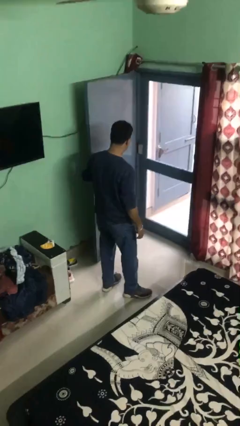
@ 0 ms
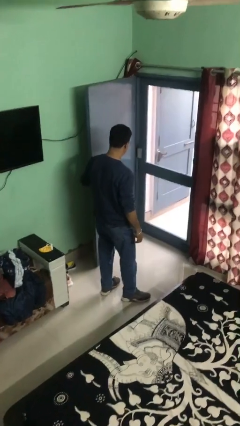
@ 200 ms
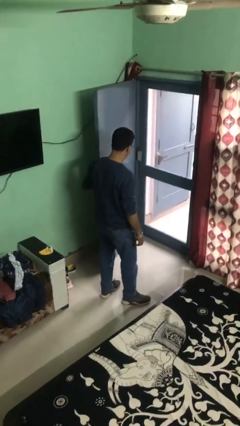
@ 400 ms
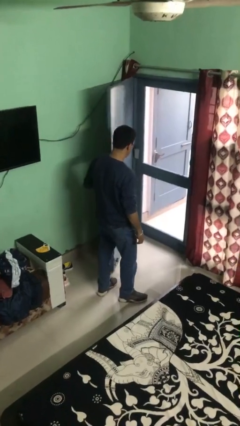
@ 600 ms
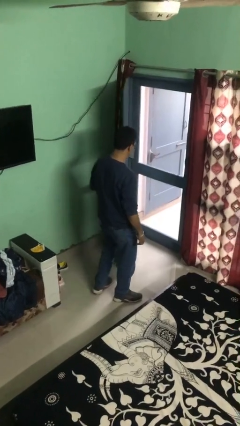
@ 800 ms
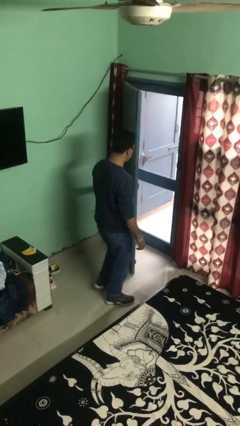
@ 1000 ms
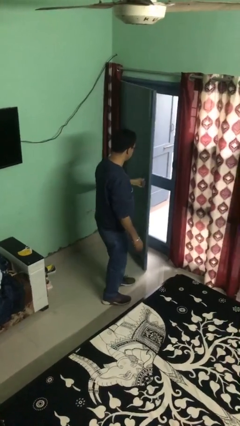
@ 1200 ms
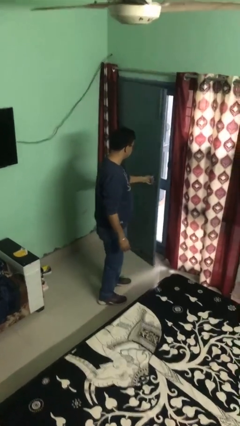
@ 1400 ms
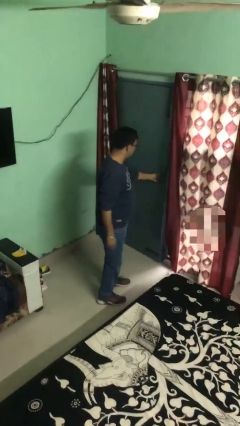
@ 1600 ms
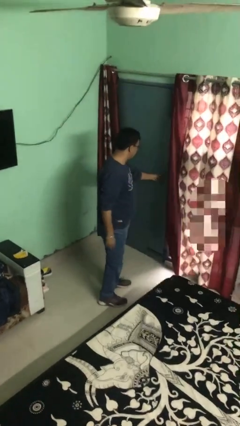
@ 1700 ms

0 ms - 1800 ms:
person closes facility door
